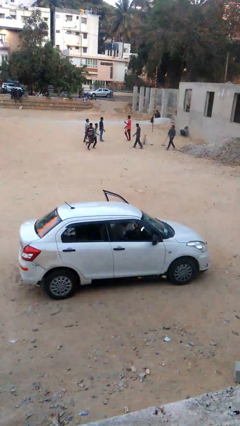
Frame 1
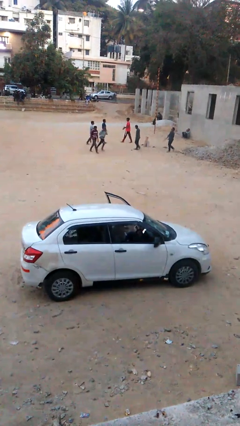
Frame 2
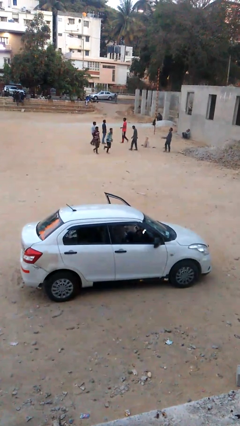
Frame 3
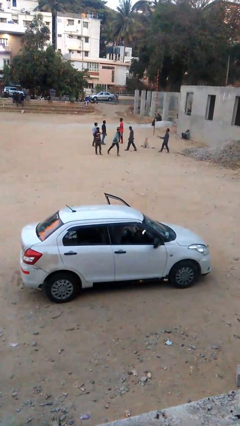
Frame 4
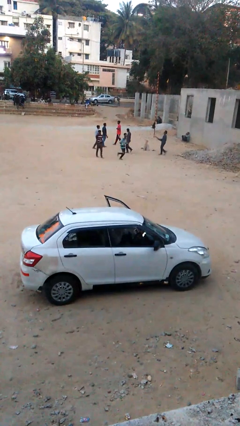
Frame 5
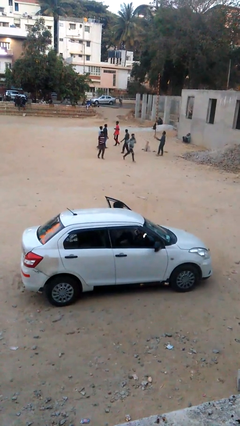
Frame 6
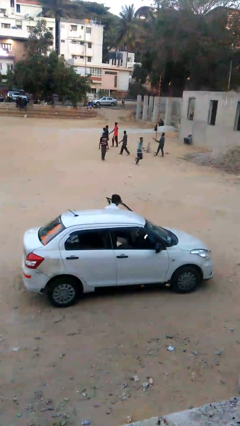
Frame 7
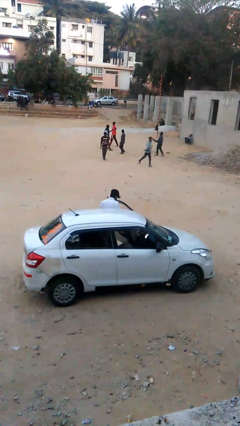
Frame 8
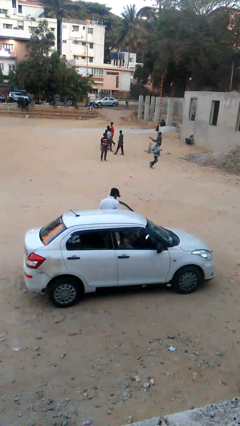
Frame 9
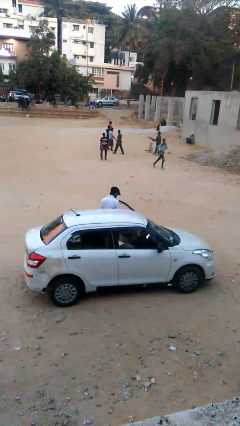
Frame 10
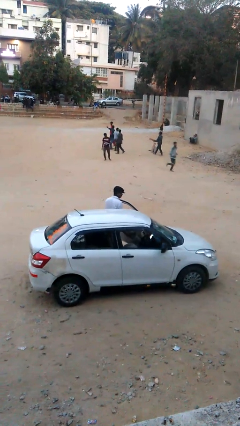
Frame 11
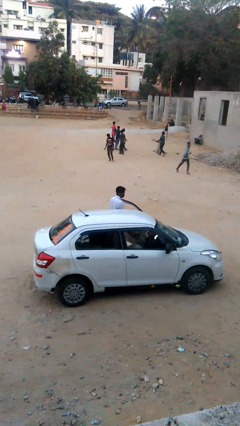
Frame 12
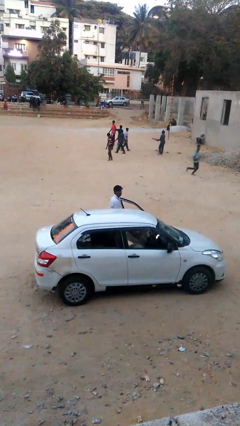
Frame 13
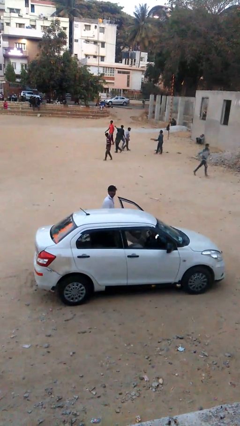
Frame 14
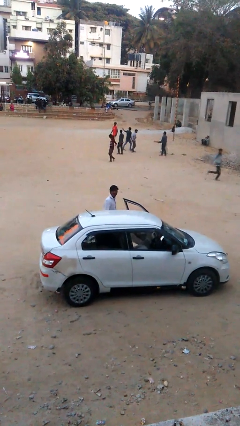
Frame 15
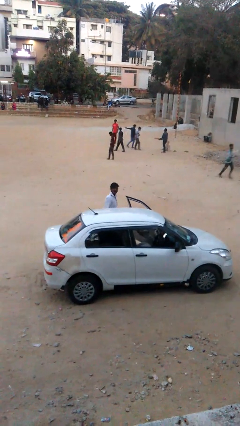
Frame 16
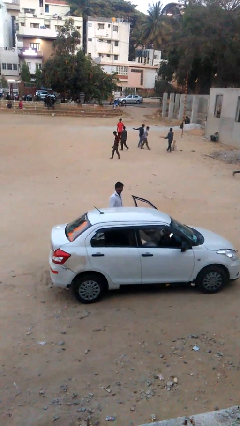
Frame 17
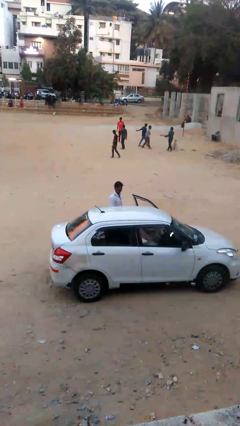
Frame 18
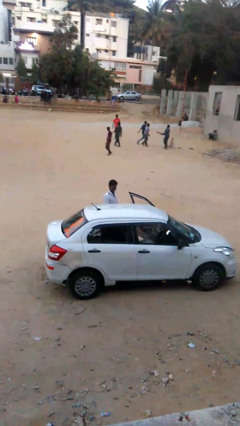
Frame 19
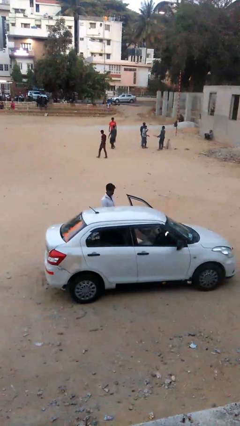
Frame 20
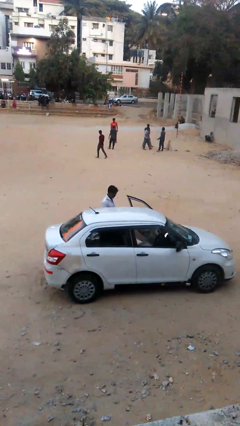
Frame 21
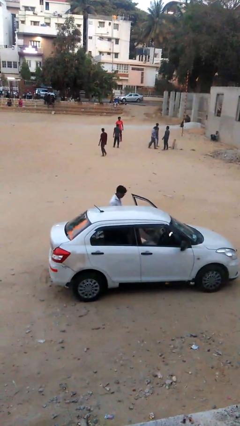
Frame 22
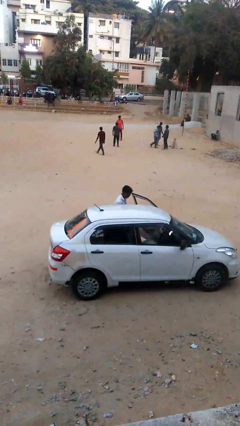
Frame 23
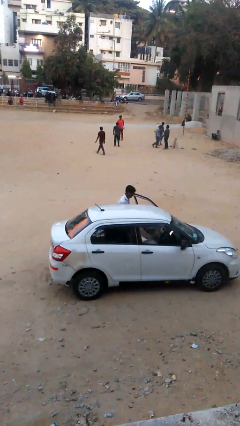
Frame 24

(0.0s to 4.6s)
person exits car

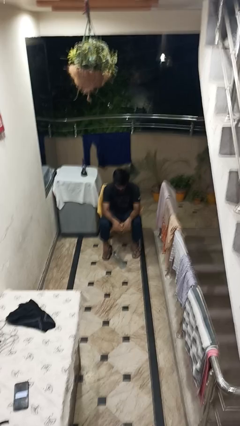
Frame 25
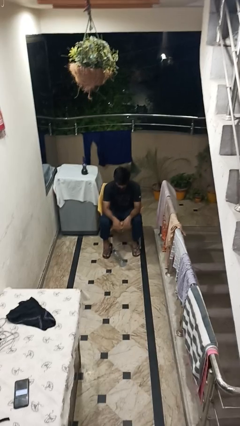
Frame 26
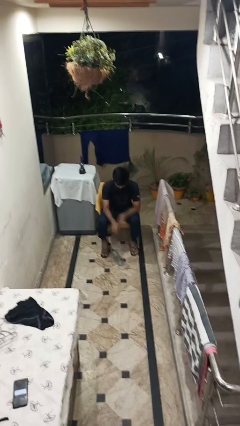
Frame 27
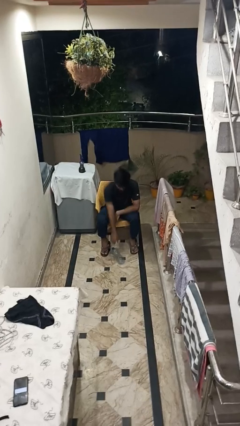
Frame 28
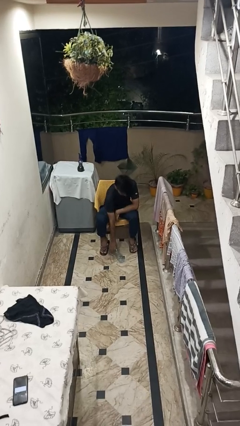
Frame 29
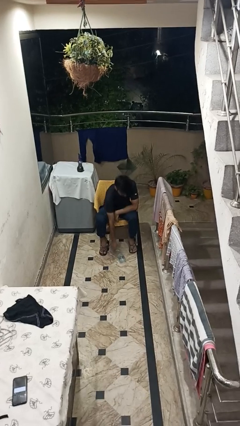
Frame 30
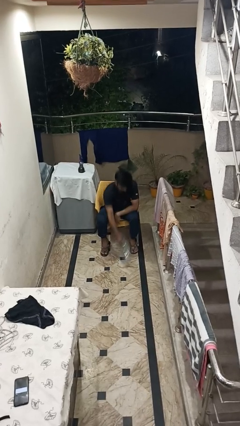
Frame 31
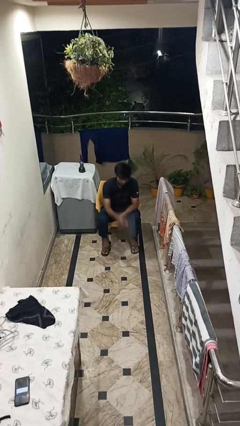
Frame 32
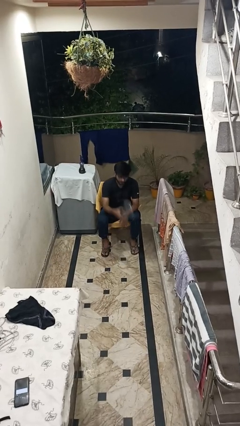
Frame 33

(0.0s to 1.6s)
person picks up object from floor

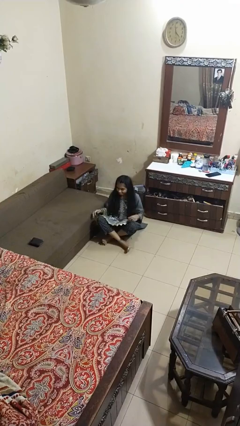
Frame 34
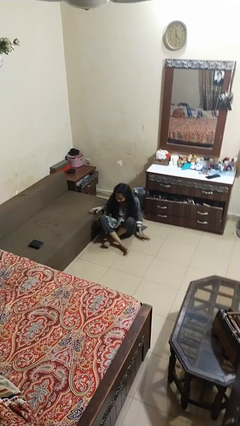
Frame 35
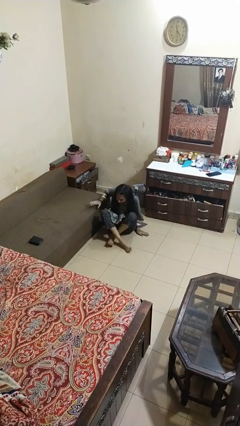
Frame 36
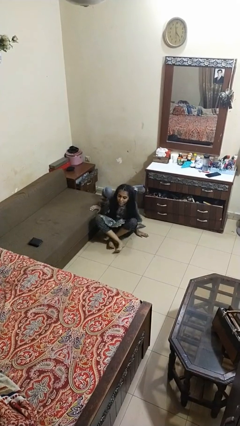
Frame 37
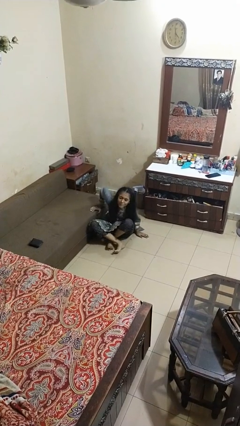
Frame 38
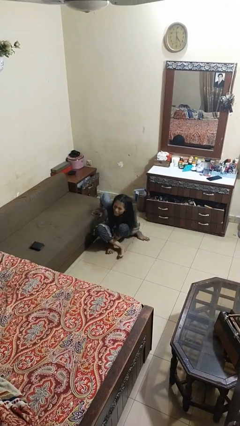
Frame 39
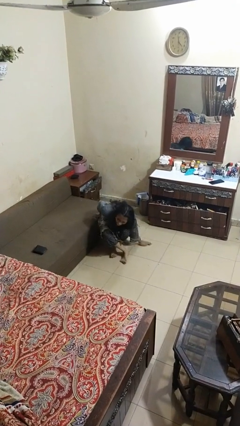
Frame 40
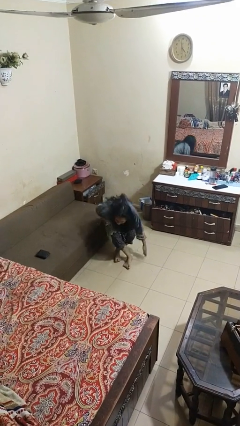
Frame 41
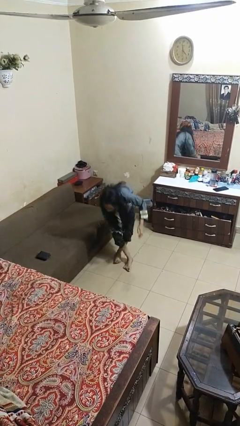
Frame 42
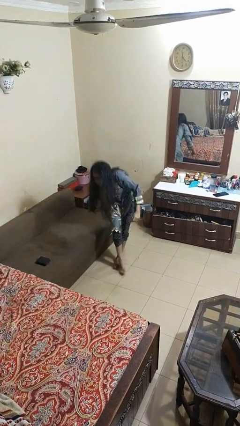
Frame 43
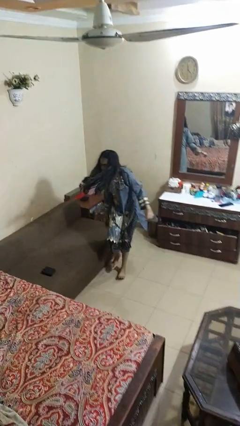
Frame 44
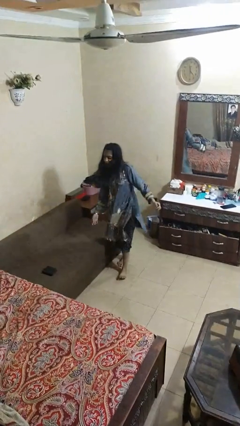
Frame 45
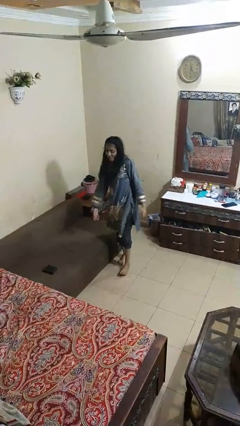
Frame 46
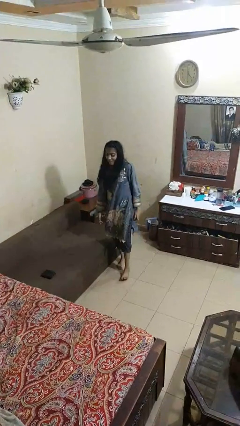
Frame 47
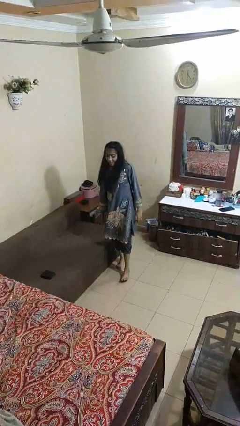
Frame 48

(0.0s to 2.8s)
person stands up from floor

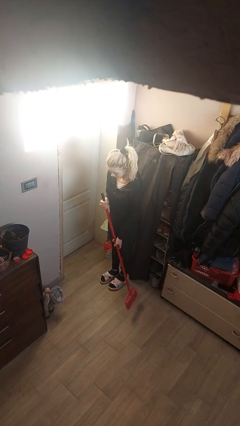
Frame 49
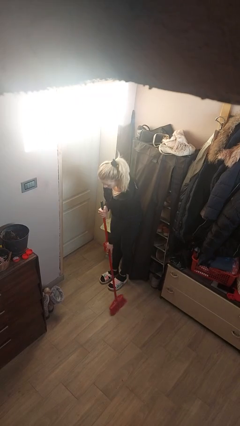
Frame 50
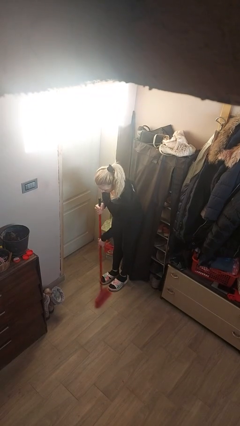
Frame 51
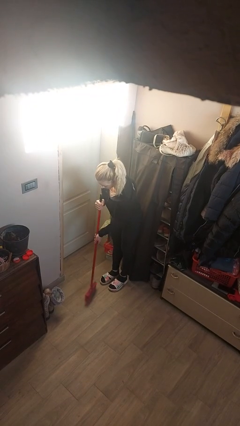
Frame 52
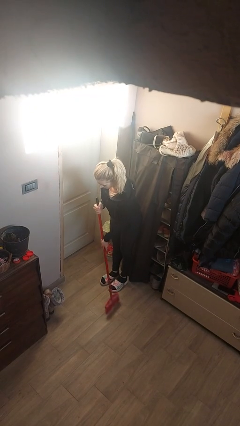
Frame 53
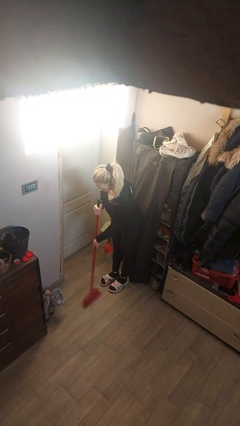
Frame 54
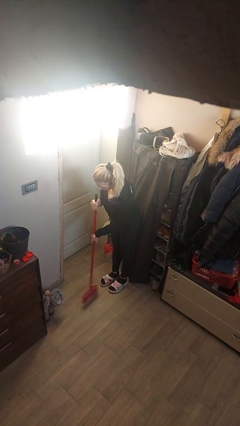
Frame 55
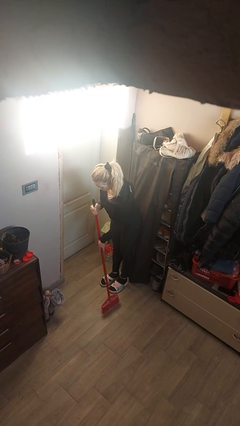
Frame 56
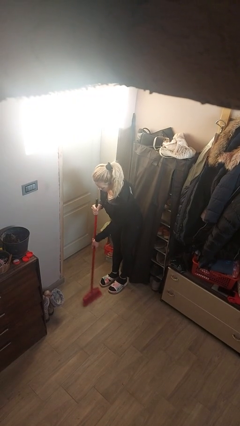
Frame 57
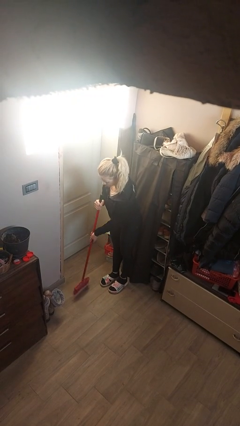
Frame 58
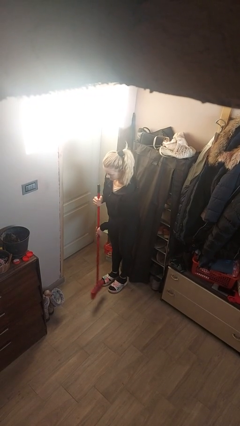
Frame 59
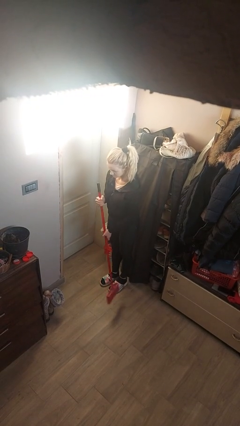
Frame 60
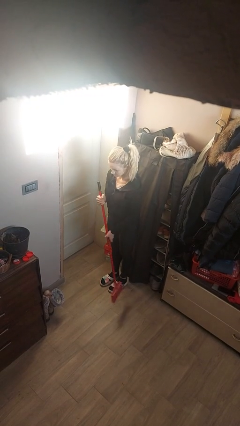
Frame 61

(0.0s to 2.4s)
person sweeps floor

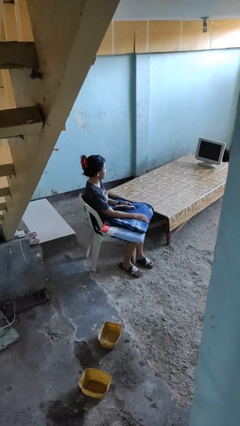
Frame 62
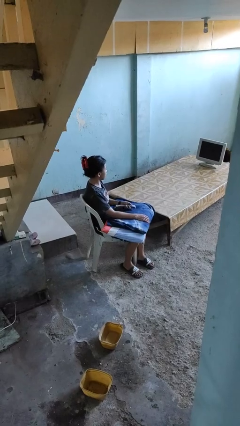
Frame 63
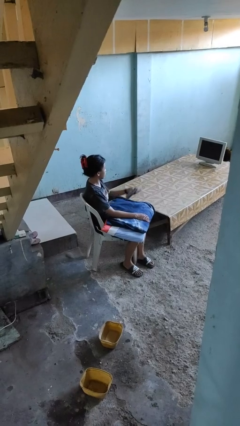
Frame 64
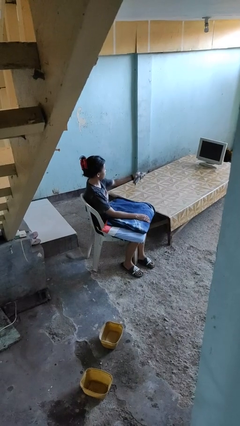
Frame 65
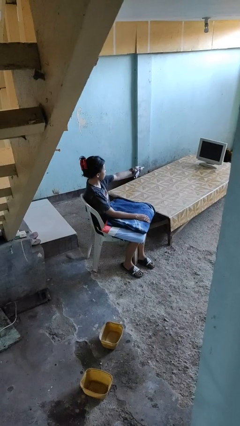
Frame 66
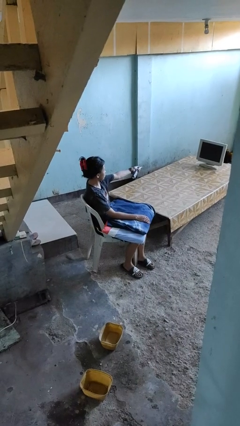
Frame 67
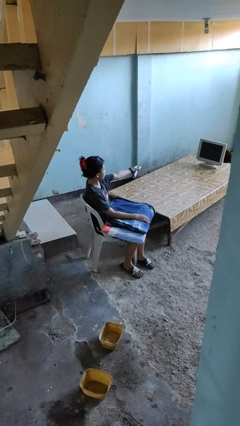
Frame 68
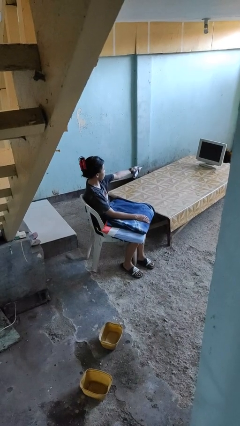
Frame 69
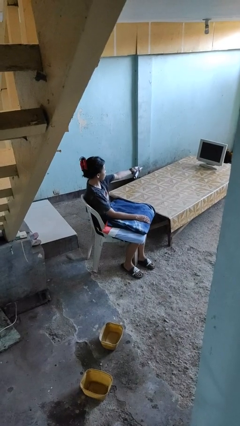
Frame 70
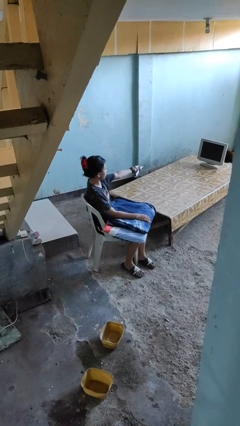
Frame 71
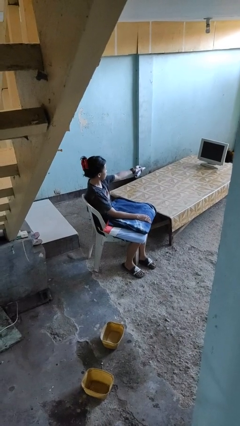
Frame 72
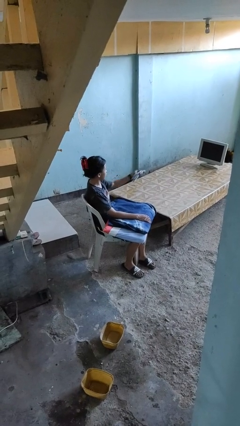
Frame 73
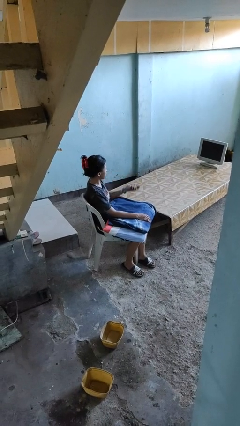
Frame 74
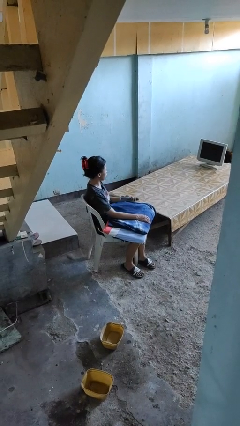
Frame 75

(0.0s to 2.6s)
person uses television remote

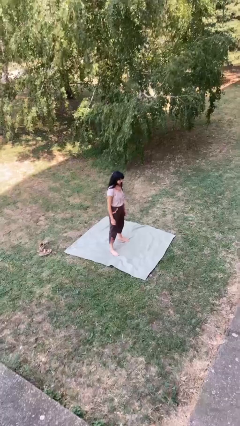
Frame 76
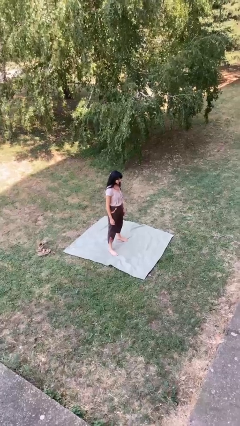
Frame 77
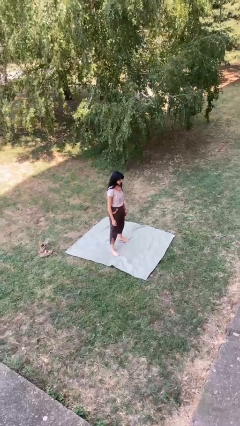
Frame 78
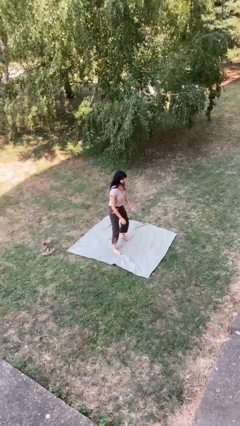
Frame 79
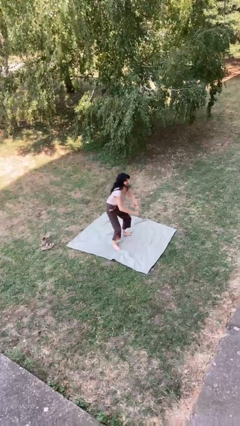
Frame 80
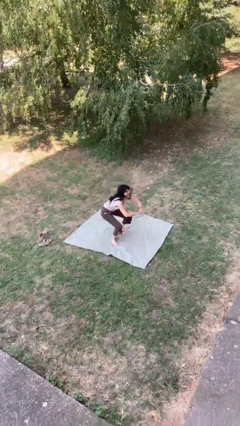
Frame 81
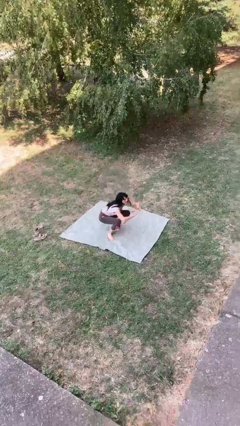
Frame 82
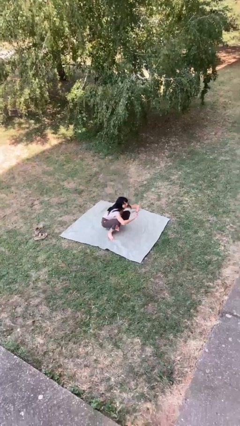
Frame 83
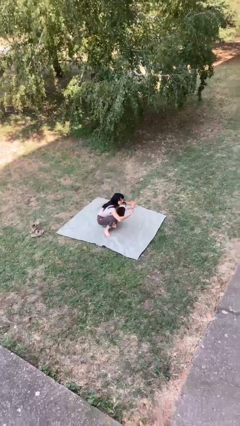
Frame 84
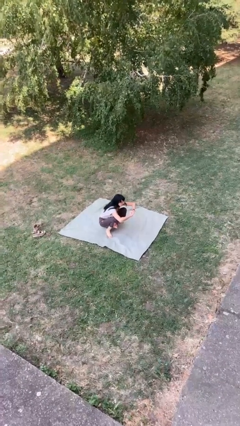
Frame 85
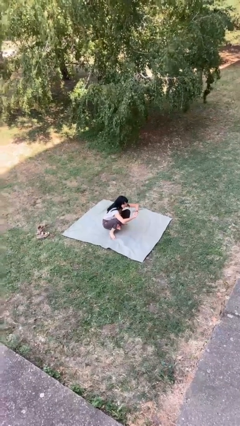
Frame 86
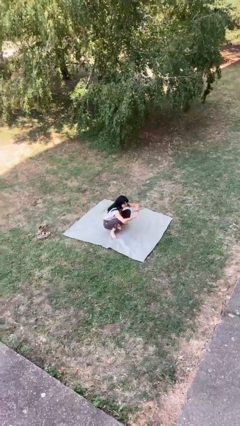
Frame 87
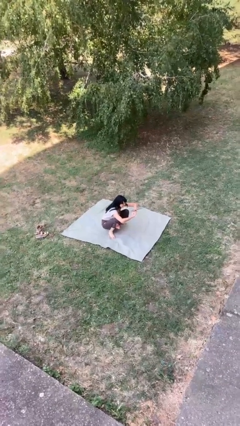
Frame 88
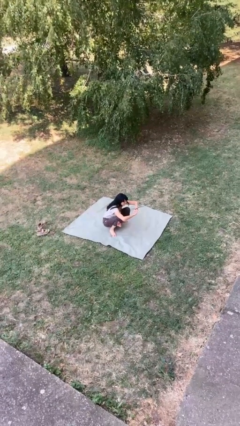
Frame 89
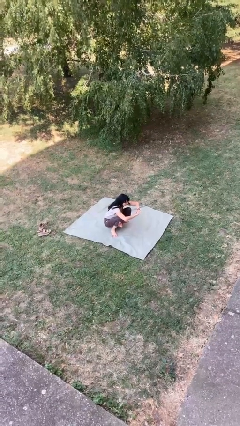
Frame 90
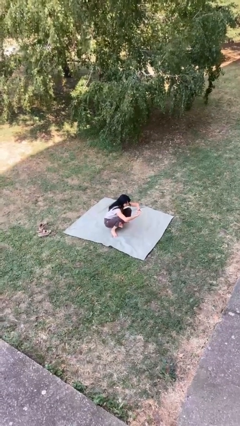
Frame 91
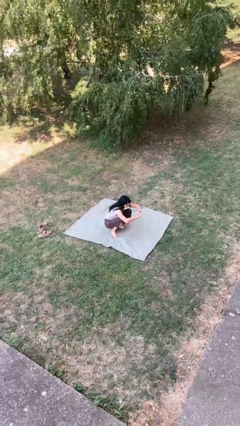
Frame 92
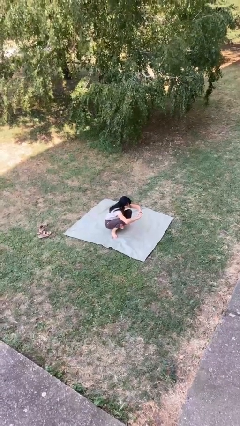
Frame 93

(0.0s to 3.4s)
person squats
